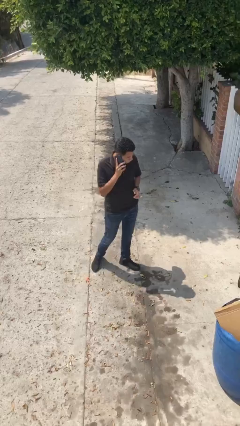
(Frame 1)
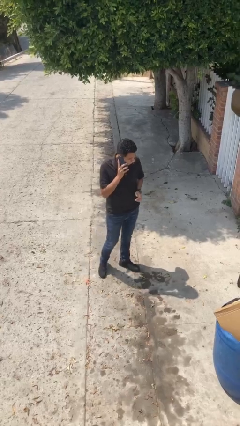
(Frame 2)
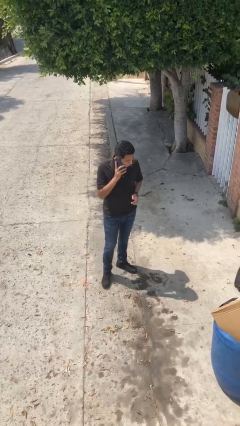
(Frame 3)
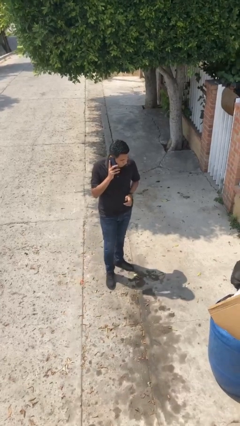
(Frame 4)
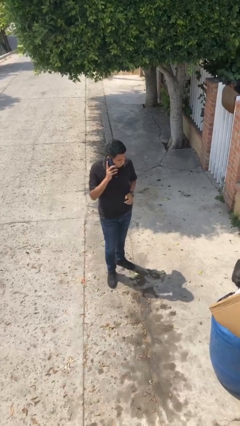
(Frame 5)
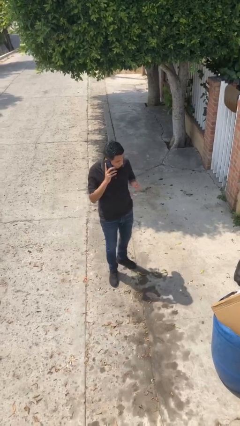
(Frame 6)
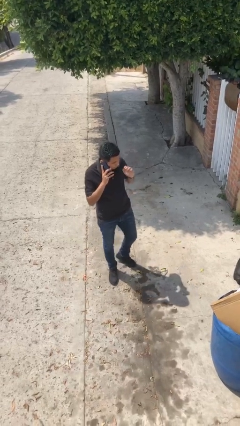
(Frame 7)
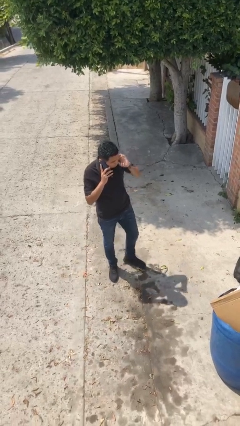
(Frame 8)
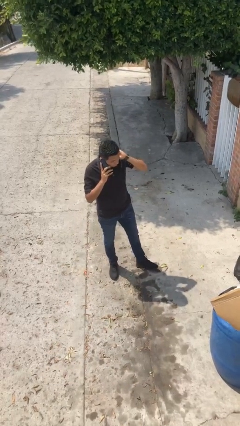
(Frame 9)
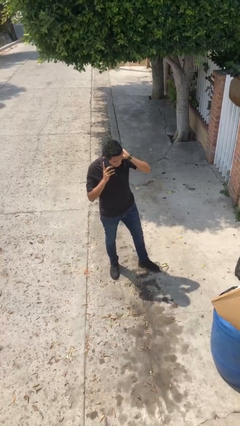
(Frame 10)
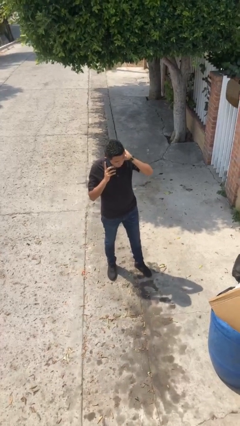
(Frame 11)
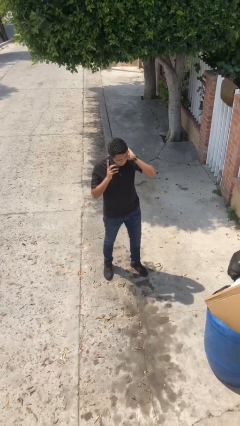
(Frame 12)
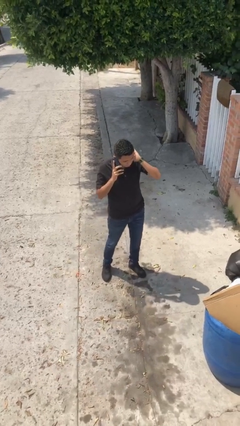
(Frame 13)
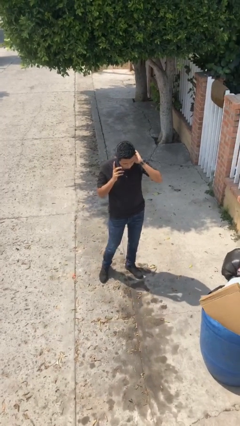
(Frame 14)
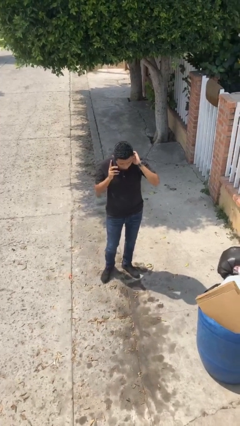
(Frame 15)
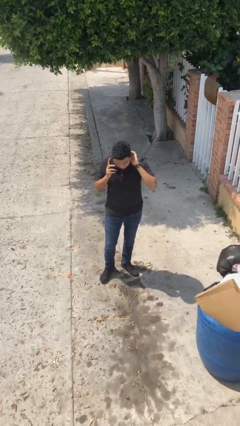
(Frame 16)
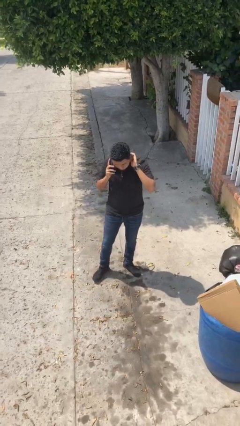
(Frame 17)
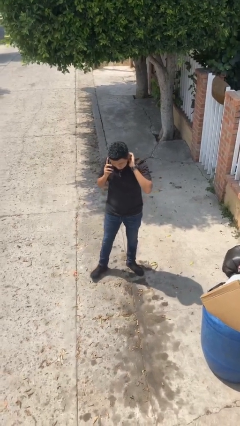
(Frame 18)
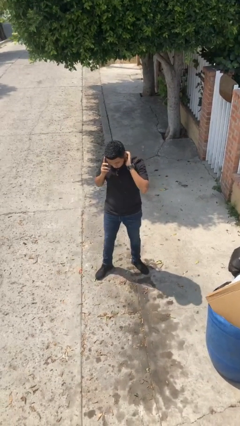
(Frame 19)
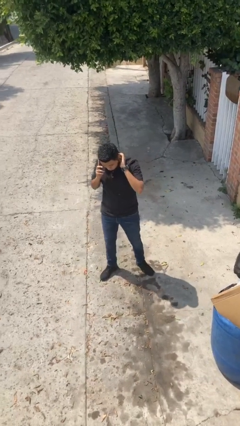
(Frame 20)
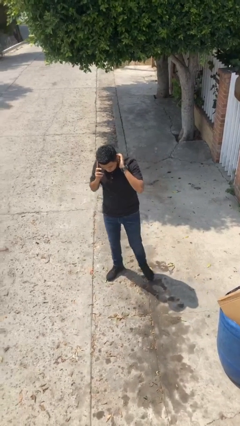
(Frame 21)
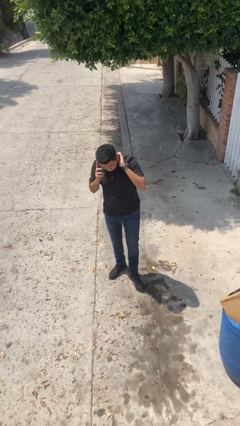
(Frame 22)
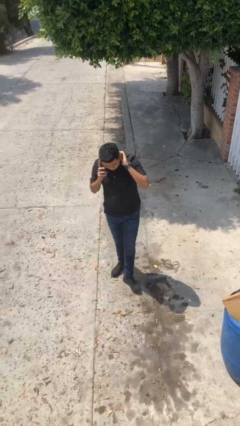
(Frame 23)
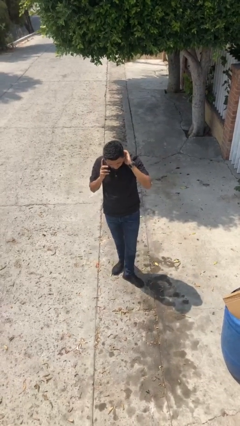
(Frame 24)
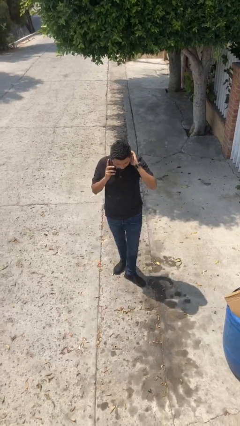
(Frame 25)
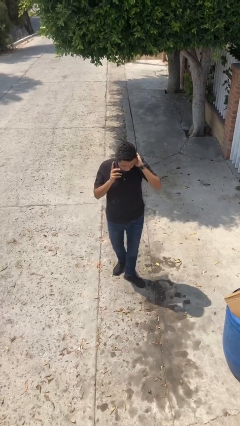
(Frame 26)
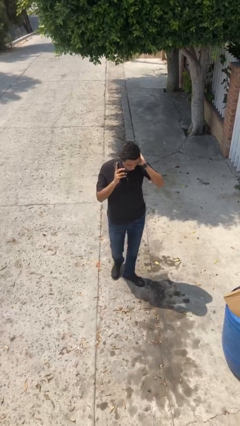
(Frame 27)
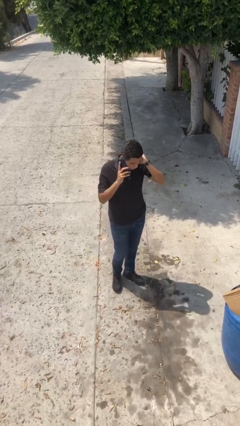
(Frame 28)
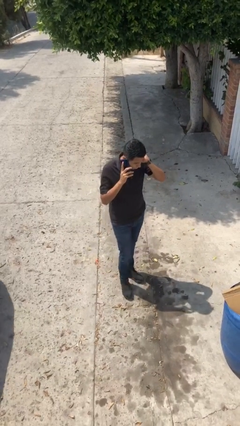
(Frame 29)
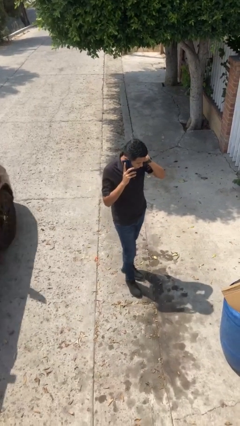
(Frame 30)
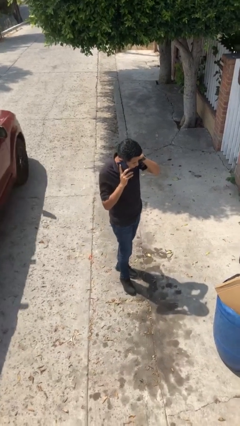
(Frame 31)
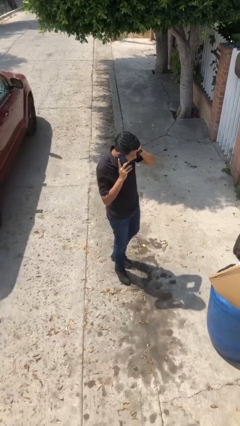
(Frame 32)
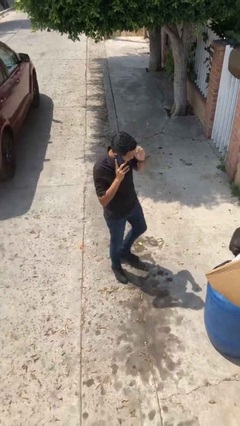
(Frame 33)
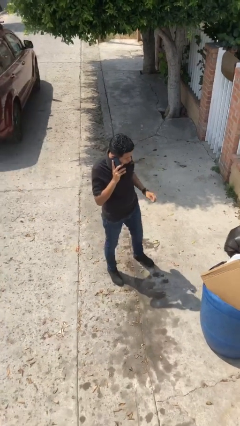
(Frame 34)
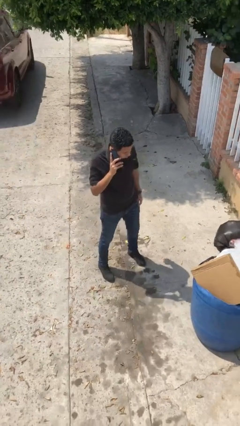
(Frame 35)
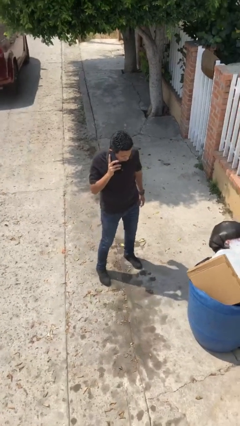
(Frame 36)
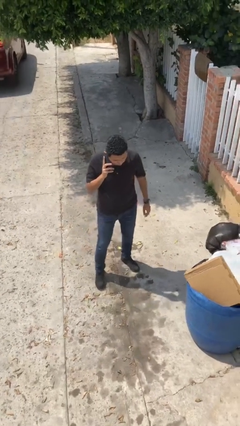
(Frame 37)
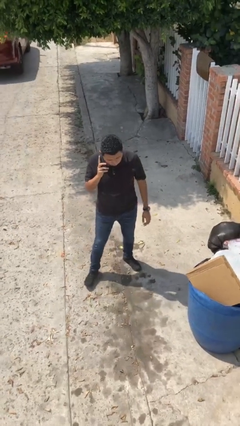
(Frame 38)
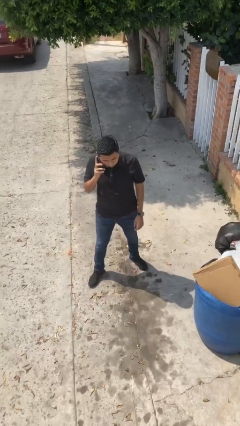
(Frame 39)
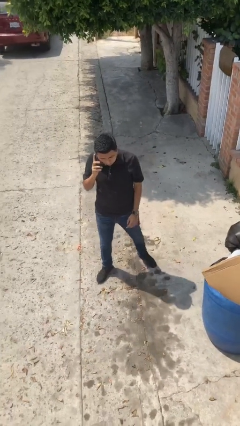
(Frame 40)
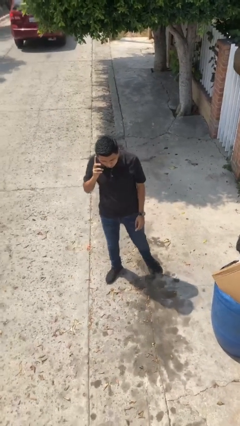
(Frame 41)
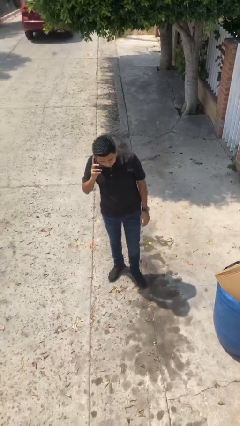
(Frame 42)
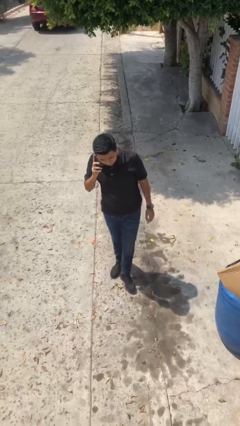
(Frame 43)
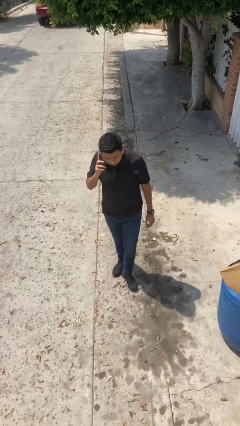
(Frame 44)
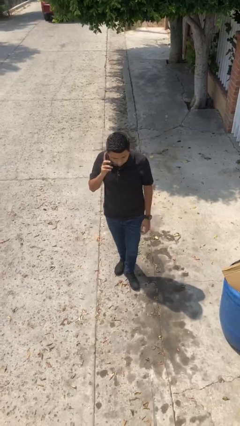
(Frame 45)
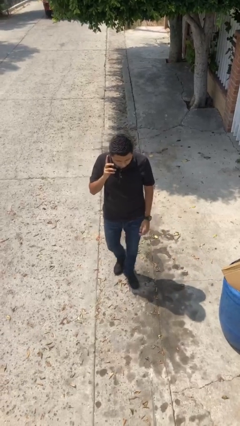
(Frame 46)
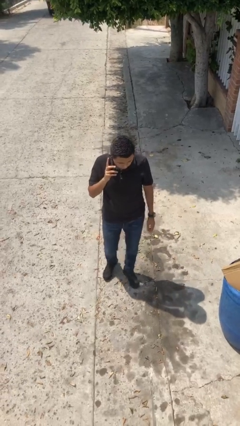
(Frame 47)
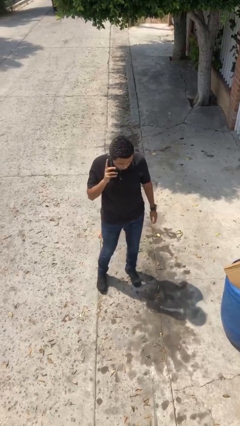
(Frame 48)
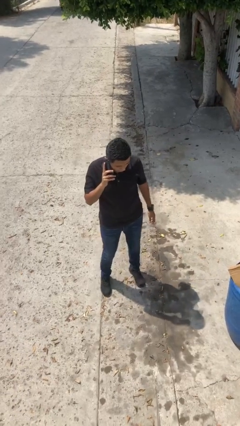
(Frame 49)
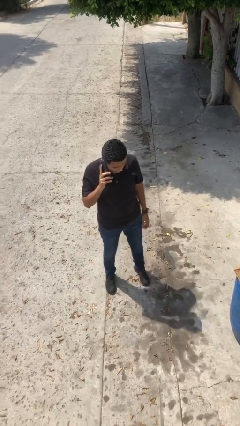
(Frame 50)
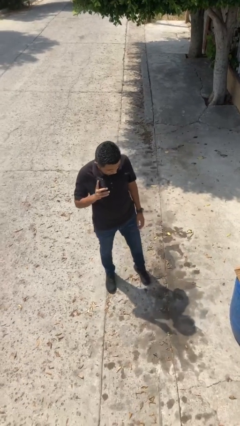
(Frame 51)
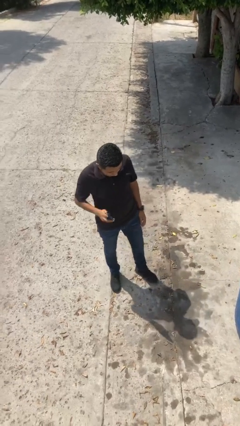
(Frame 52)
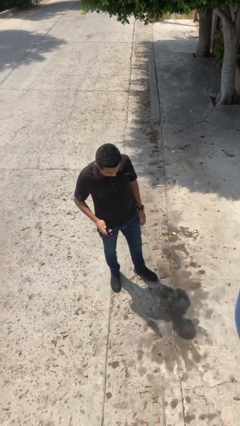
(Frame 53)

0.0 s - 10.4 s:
person talks on phone

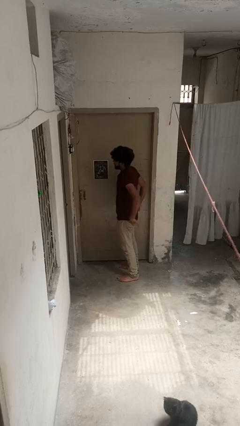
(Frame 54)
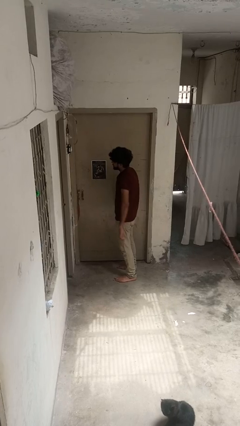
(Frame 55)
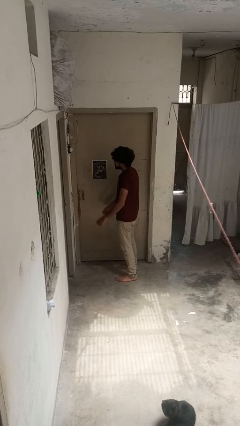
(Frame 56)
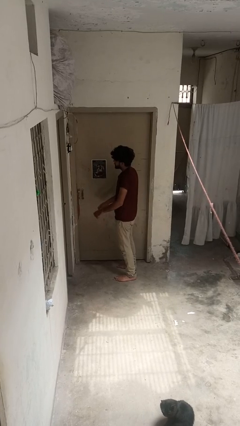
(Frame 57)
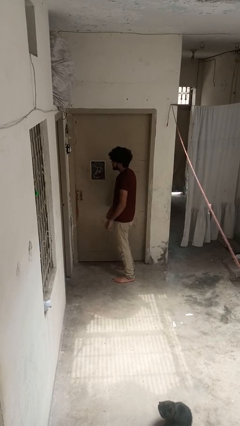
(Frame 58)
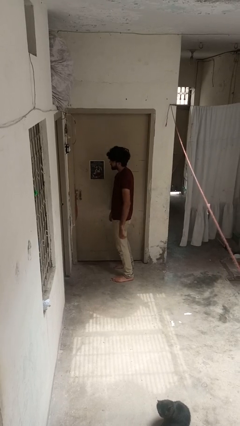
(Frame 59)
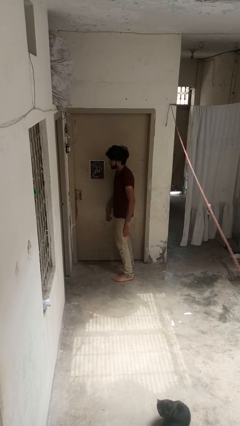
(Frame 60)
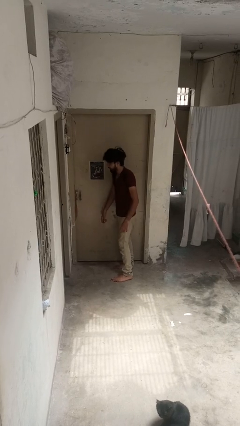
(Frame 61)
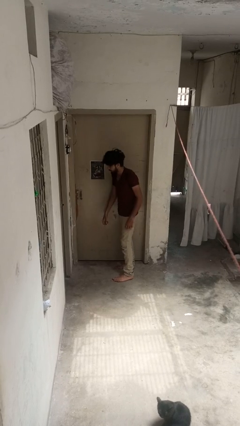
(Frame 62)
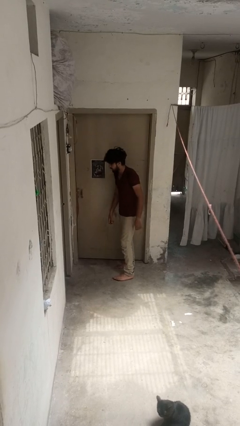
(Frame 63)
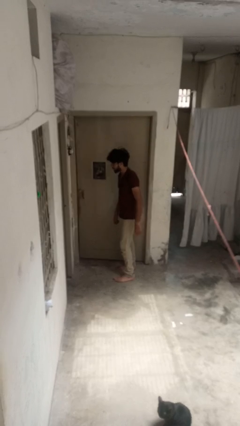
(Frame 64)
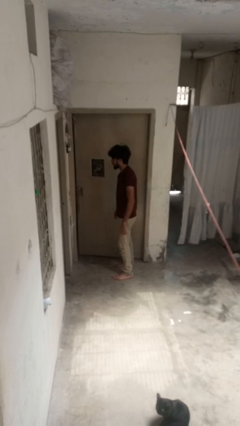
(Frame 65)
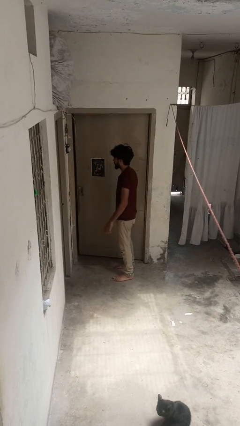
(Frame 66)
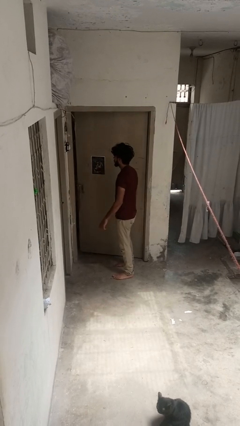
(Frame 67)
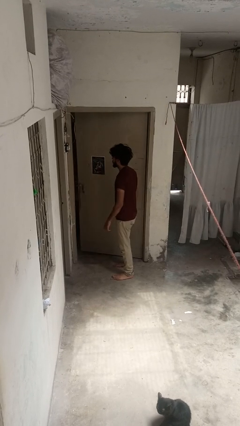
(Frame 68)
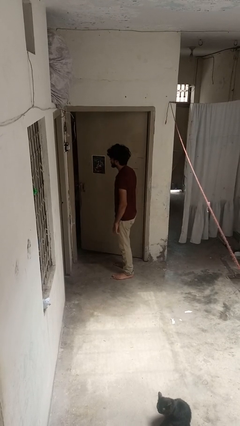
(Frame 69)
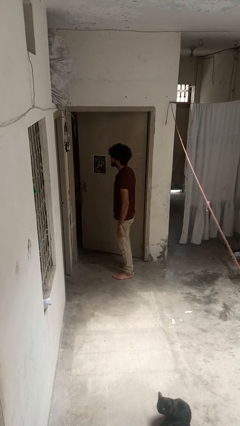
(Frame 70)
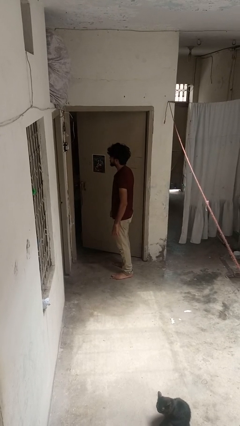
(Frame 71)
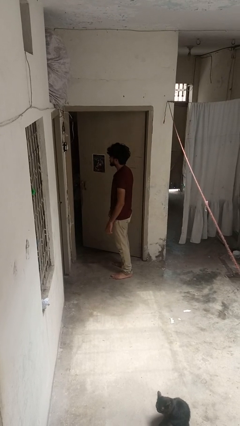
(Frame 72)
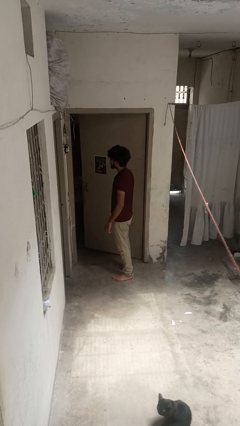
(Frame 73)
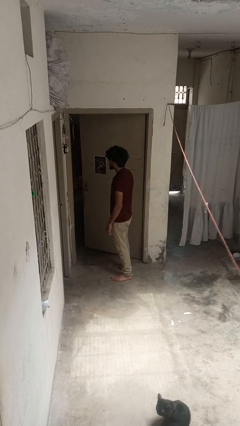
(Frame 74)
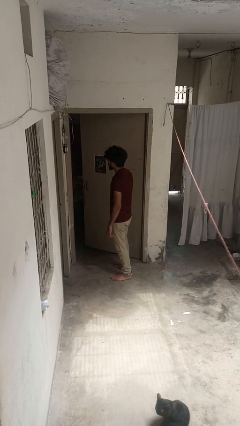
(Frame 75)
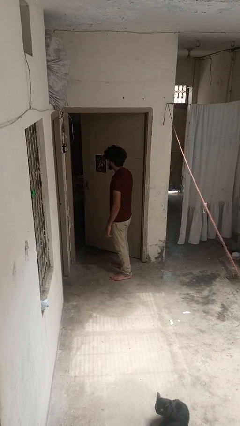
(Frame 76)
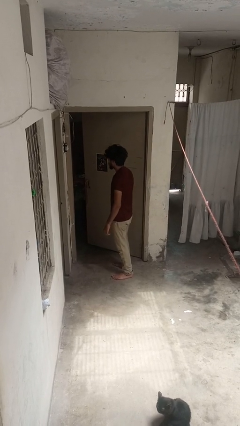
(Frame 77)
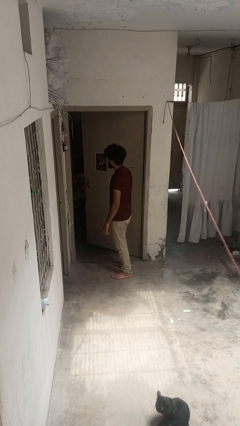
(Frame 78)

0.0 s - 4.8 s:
person opens facility door

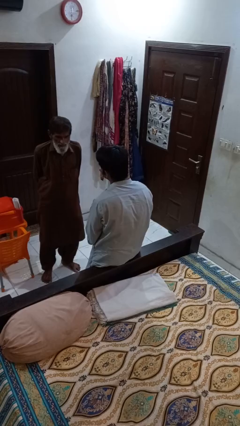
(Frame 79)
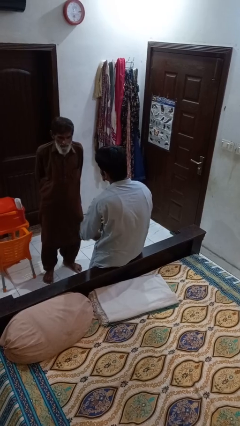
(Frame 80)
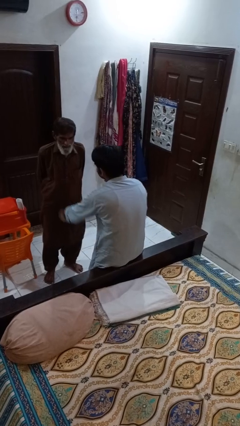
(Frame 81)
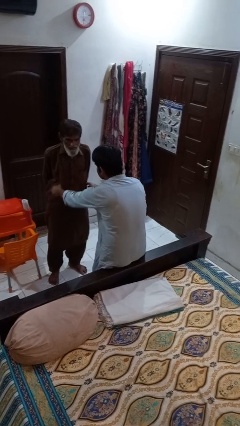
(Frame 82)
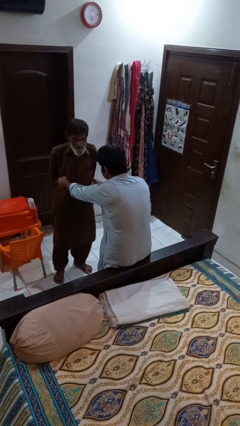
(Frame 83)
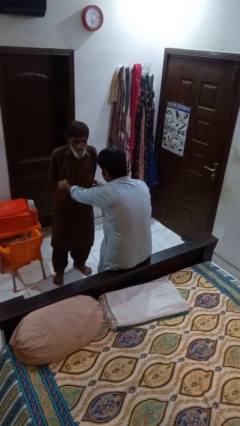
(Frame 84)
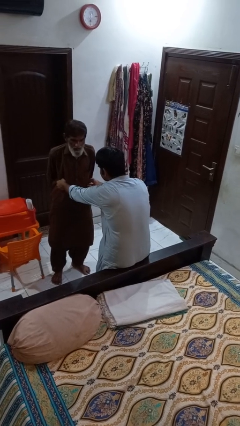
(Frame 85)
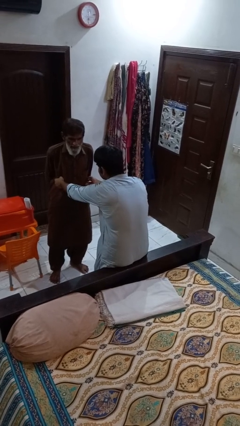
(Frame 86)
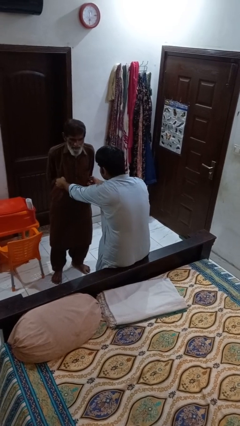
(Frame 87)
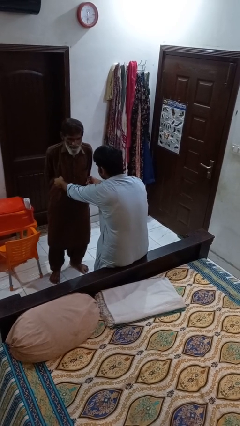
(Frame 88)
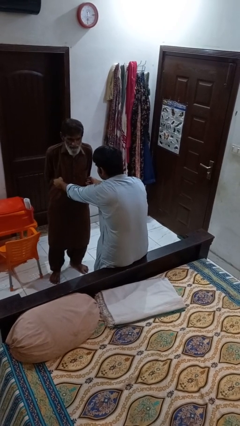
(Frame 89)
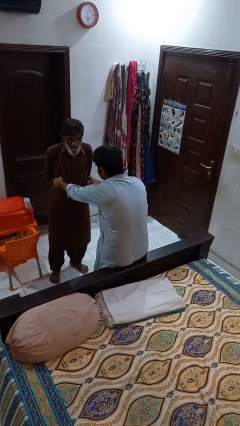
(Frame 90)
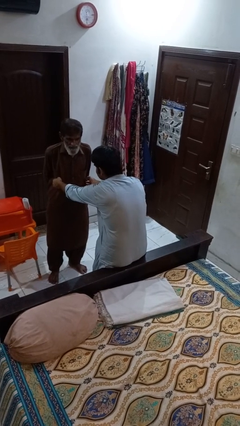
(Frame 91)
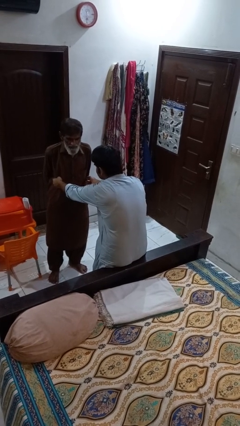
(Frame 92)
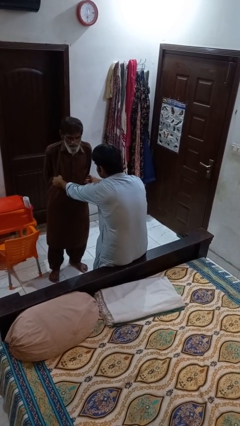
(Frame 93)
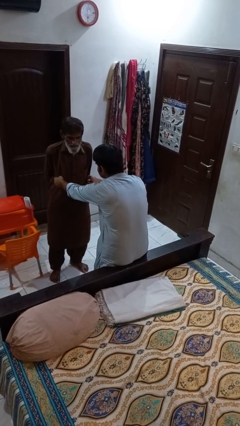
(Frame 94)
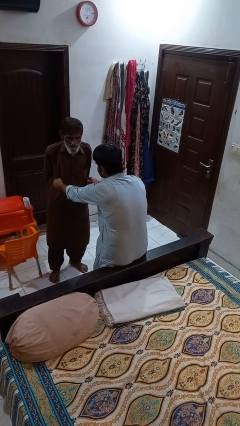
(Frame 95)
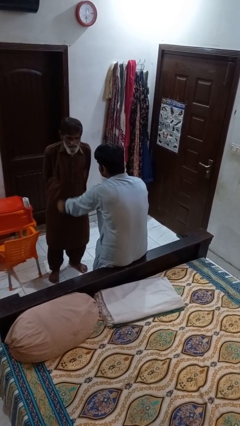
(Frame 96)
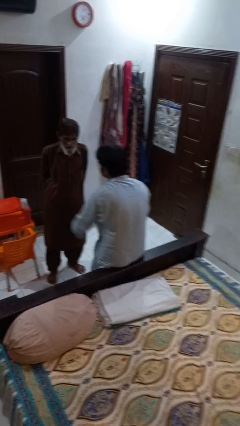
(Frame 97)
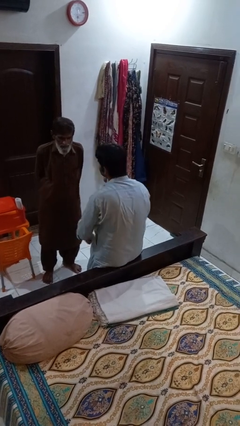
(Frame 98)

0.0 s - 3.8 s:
person tickles person
